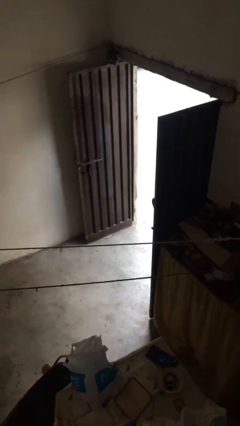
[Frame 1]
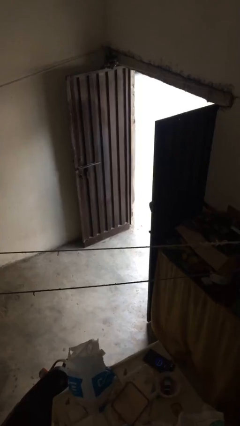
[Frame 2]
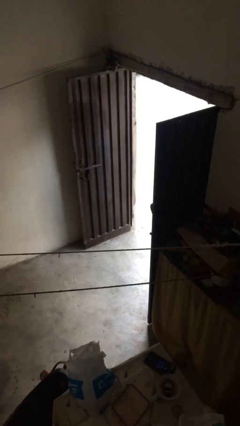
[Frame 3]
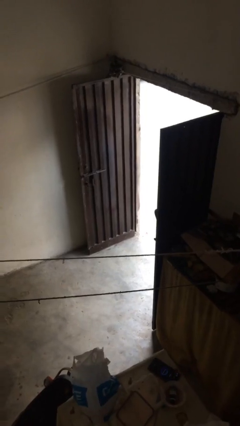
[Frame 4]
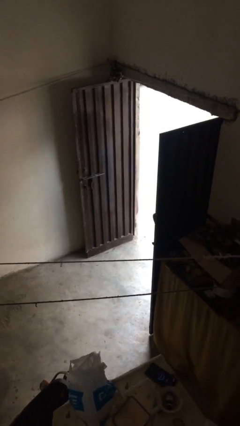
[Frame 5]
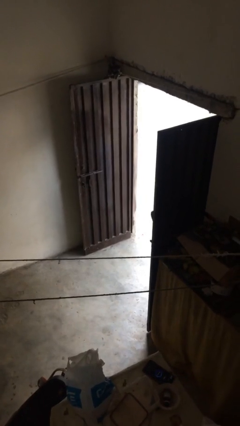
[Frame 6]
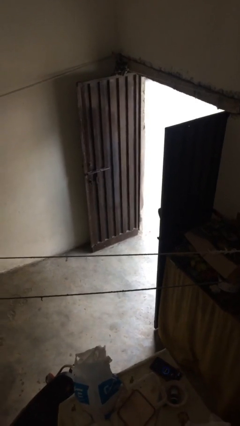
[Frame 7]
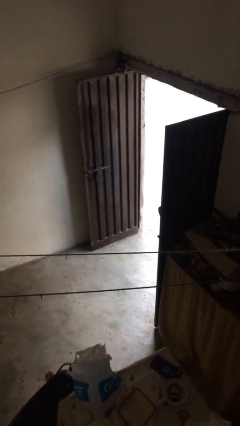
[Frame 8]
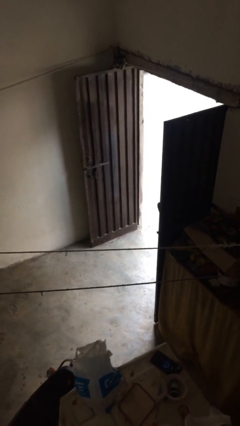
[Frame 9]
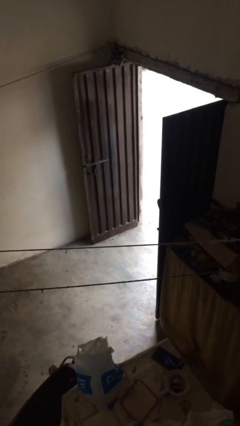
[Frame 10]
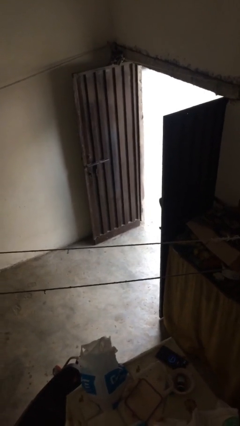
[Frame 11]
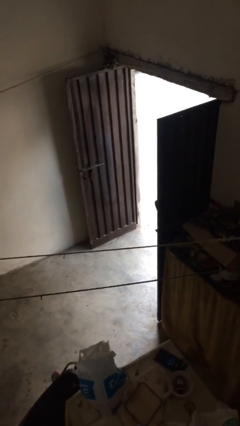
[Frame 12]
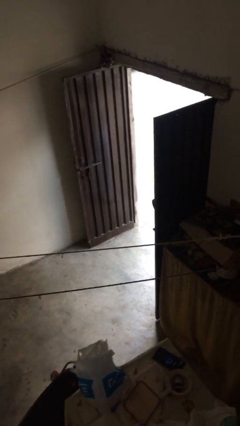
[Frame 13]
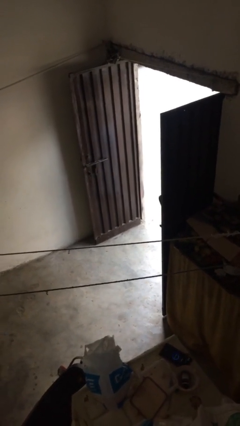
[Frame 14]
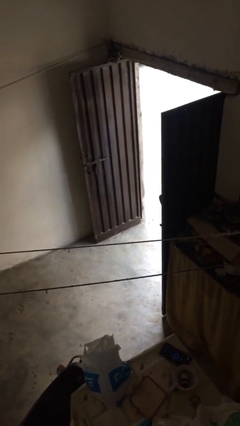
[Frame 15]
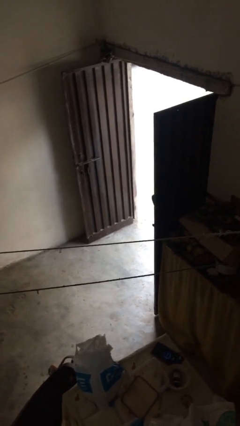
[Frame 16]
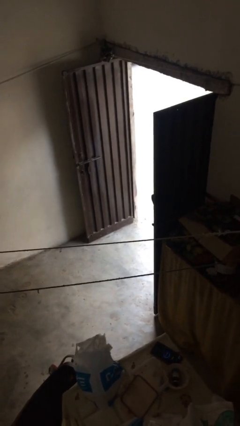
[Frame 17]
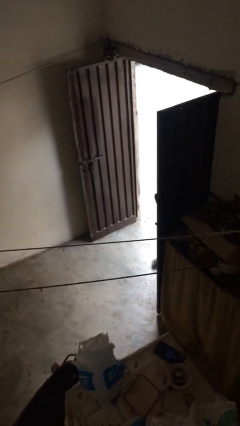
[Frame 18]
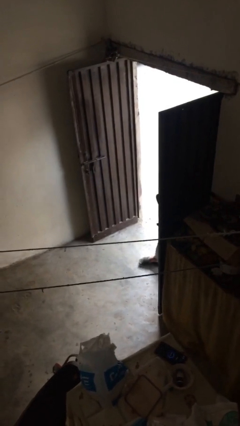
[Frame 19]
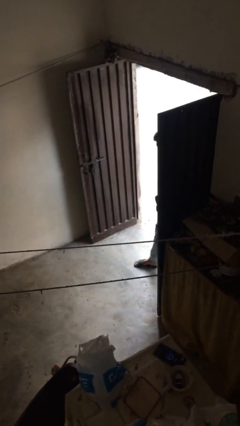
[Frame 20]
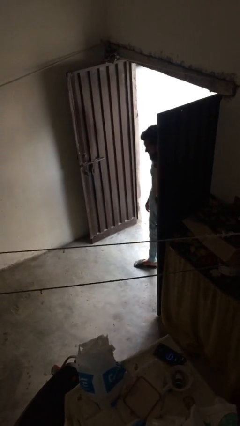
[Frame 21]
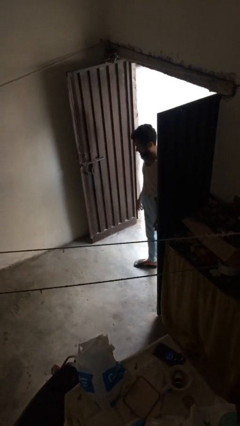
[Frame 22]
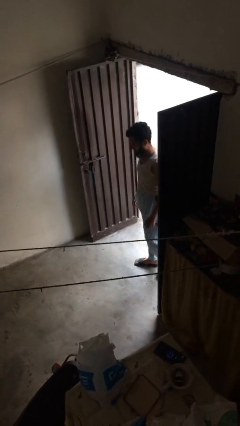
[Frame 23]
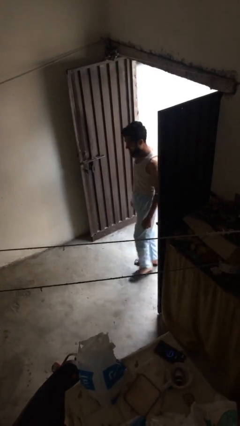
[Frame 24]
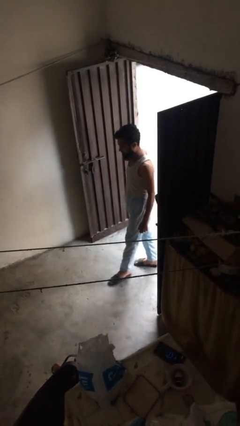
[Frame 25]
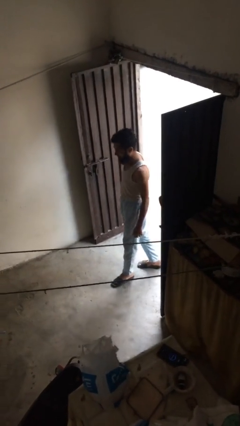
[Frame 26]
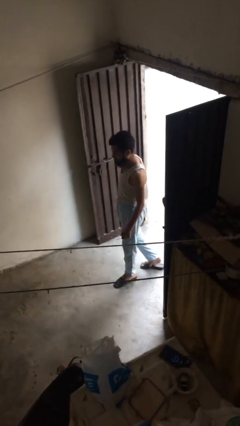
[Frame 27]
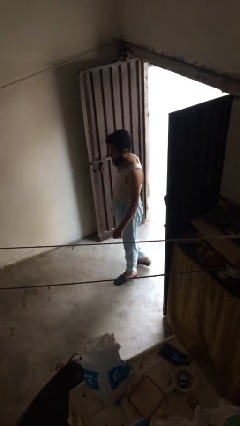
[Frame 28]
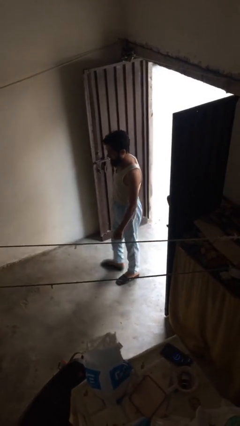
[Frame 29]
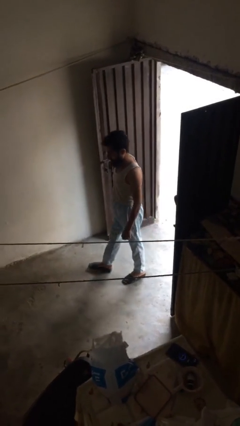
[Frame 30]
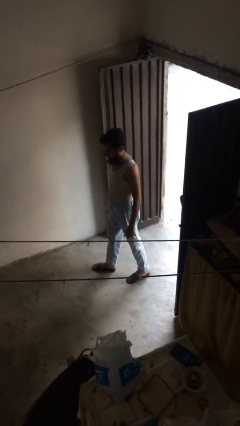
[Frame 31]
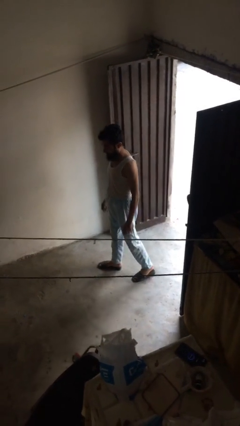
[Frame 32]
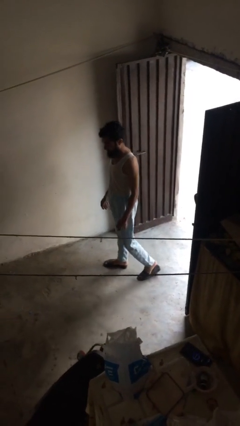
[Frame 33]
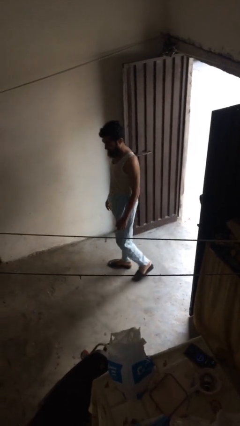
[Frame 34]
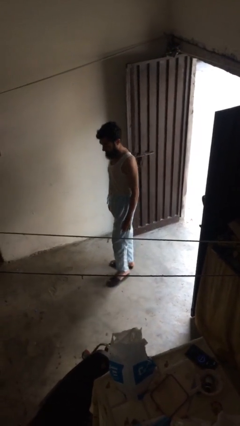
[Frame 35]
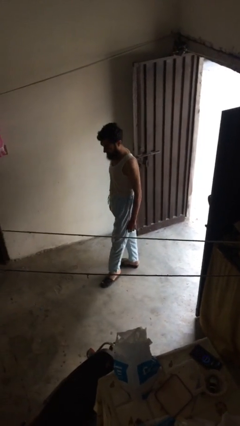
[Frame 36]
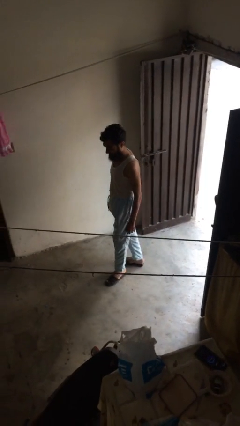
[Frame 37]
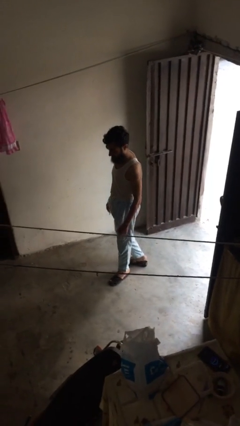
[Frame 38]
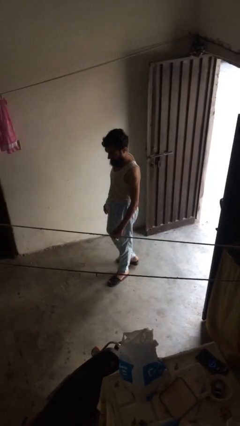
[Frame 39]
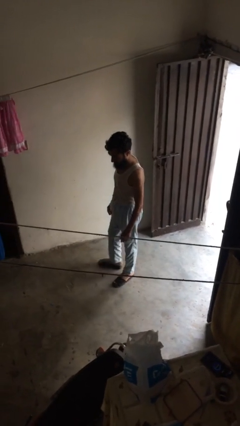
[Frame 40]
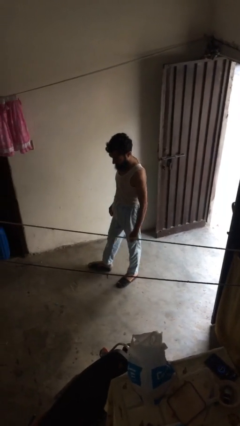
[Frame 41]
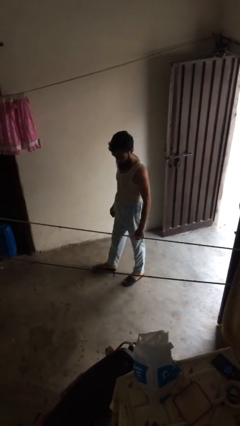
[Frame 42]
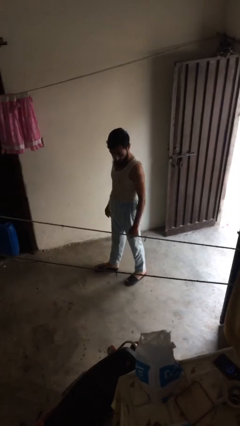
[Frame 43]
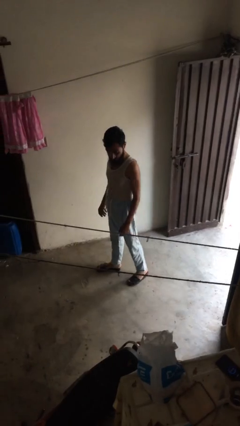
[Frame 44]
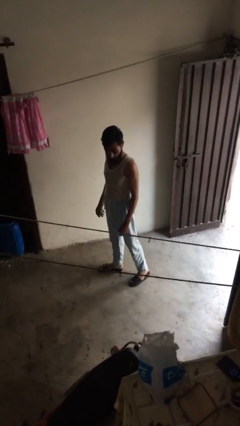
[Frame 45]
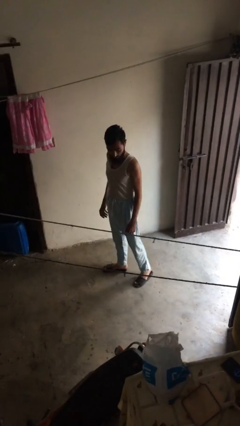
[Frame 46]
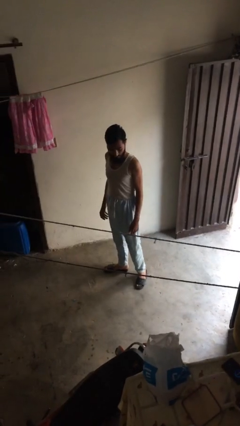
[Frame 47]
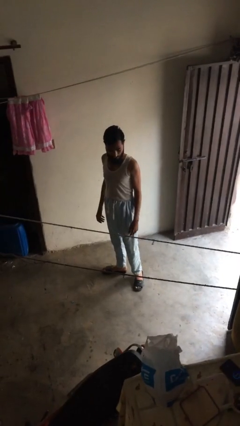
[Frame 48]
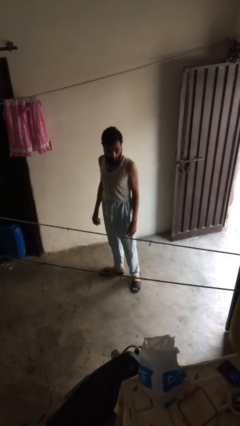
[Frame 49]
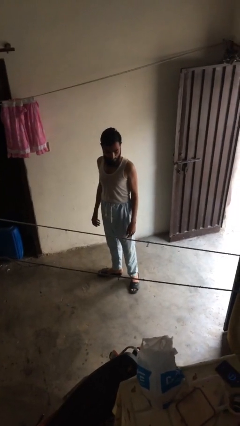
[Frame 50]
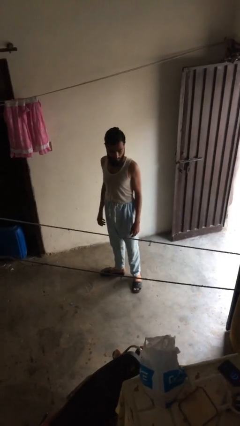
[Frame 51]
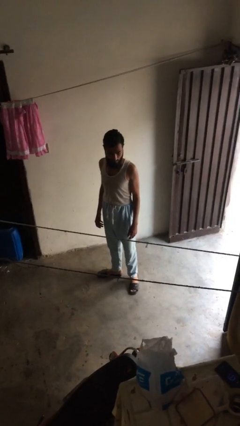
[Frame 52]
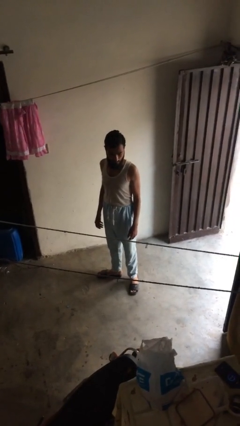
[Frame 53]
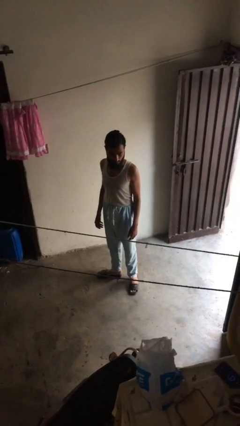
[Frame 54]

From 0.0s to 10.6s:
person enters scene through structure

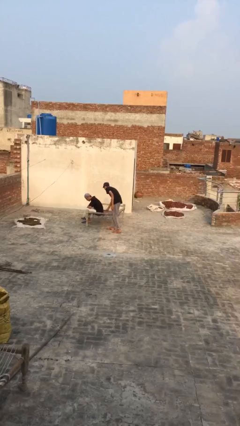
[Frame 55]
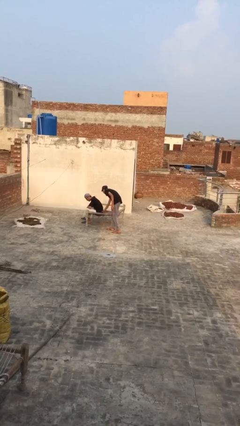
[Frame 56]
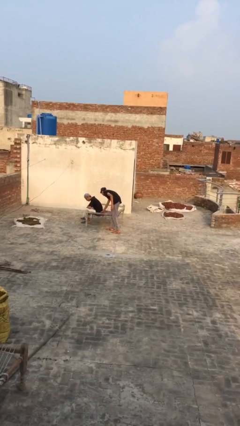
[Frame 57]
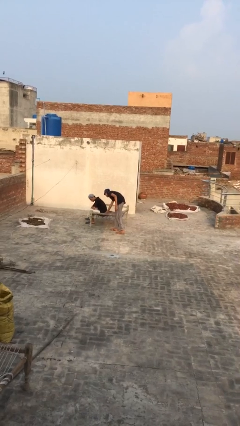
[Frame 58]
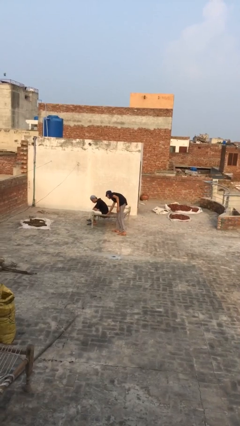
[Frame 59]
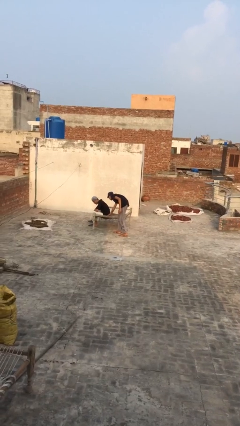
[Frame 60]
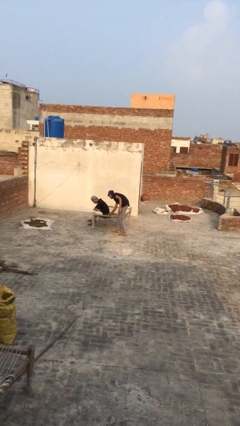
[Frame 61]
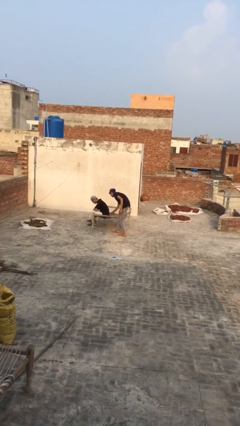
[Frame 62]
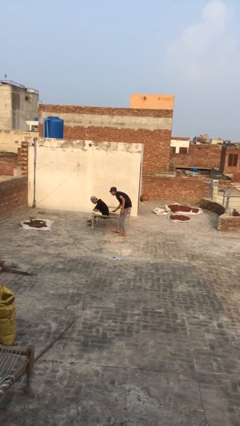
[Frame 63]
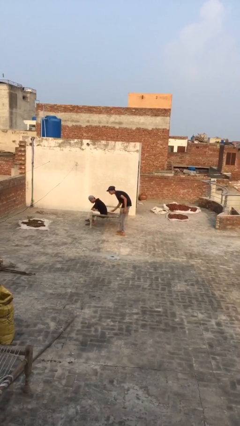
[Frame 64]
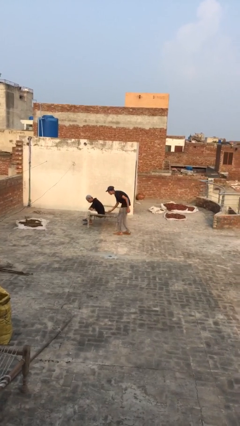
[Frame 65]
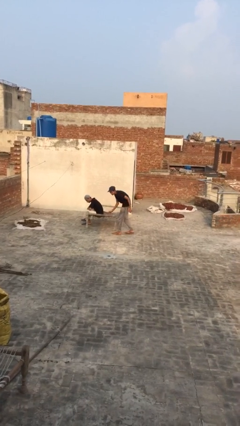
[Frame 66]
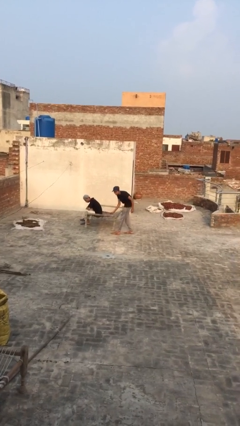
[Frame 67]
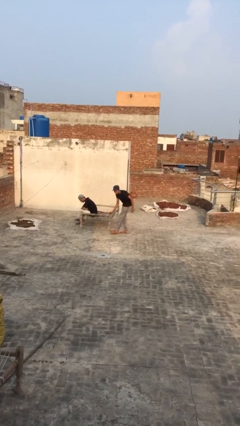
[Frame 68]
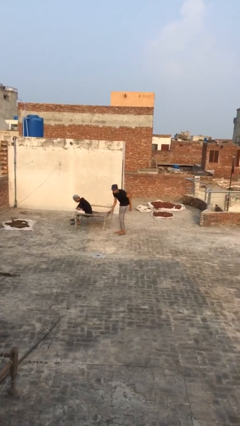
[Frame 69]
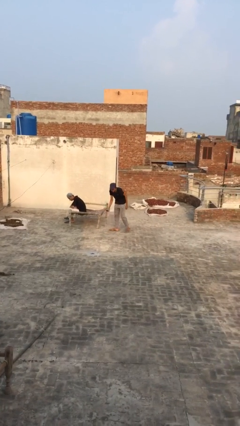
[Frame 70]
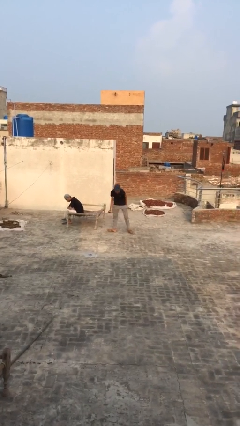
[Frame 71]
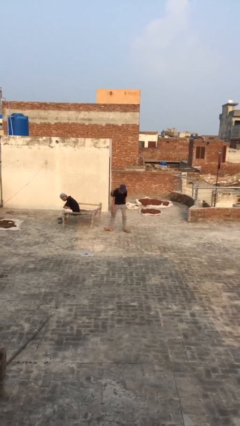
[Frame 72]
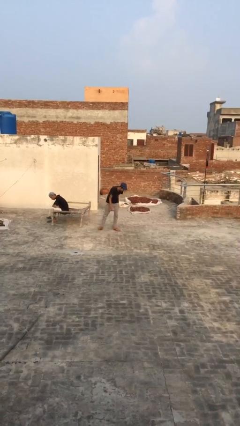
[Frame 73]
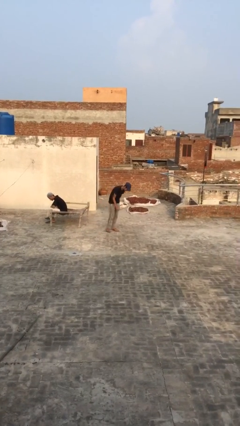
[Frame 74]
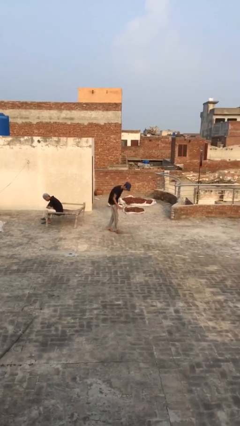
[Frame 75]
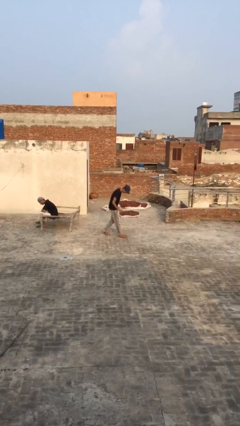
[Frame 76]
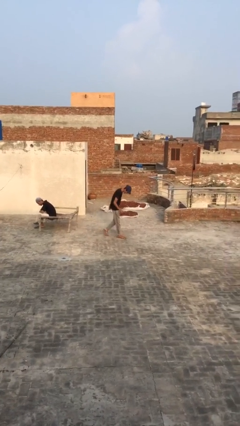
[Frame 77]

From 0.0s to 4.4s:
person steals object from person

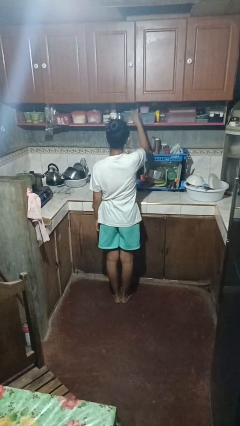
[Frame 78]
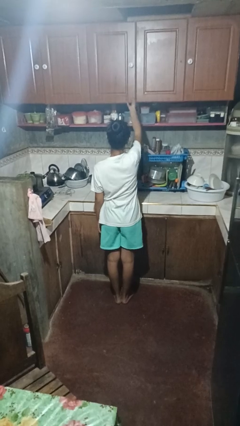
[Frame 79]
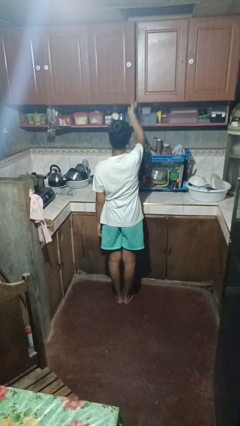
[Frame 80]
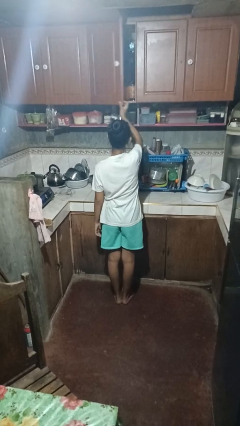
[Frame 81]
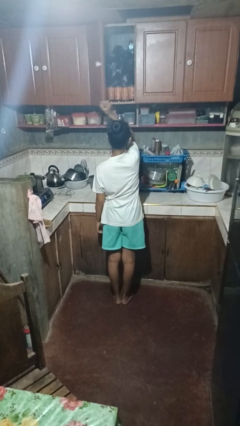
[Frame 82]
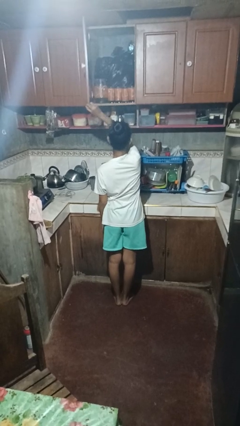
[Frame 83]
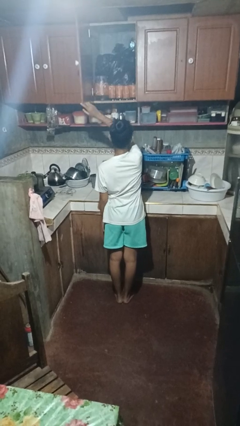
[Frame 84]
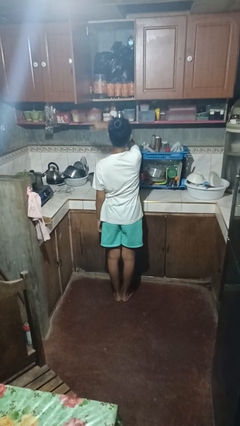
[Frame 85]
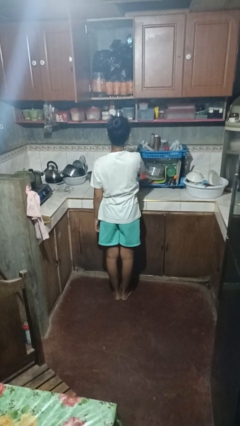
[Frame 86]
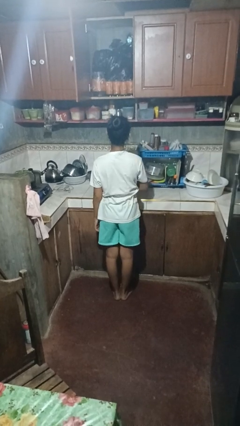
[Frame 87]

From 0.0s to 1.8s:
person opens cabinet

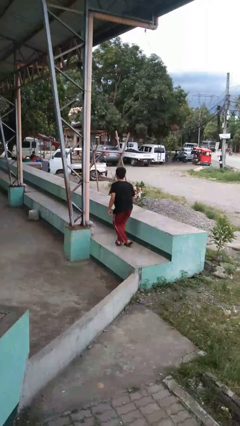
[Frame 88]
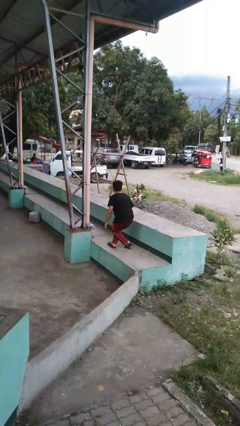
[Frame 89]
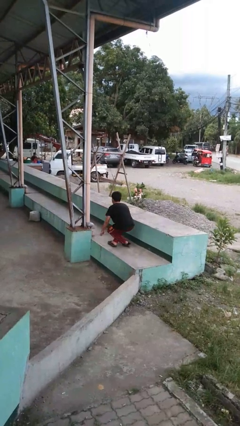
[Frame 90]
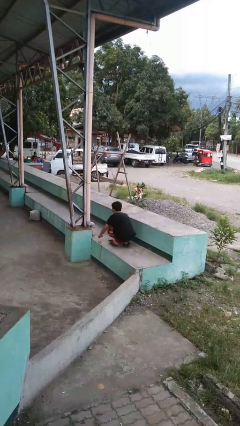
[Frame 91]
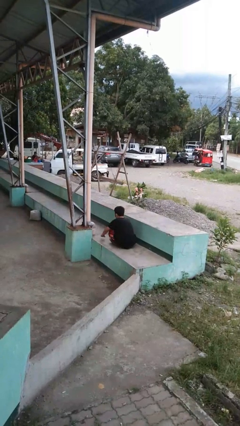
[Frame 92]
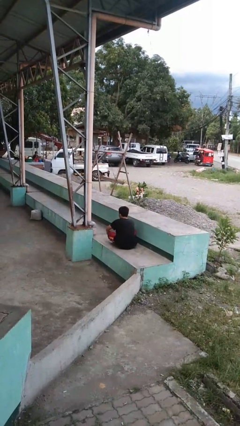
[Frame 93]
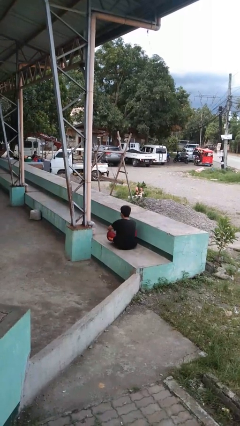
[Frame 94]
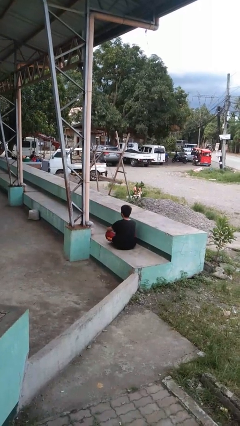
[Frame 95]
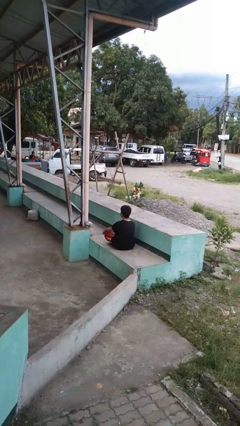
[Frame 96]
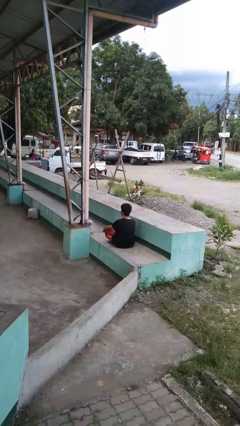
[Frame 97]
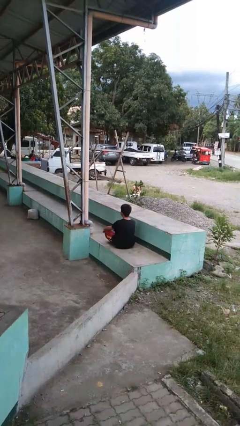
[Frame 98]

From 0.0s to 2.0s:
person sits crisscross
